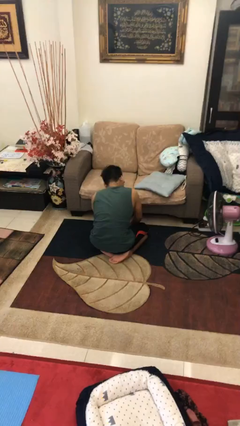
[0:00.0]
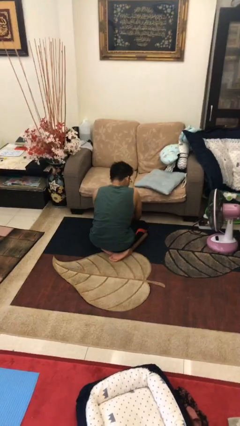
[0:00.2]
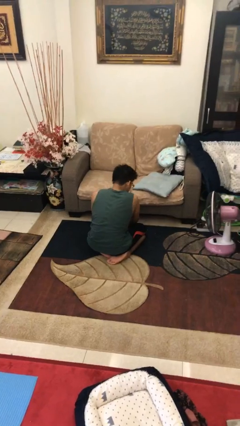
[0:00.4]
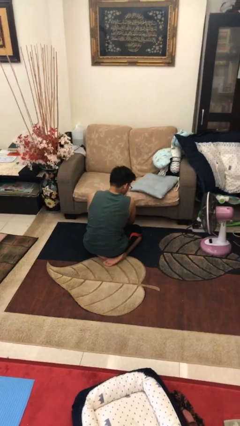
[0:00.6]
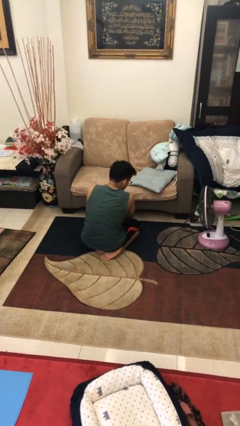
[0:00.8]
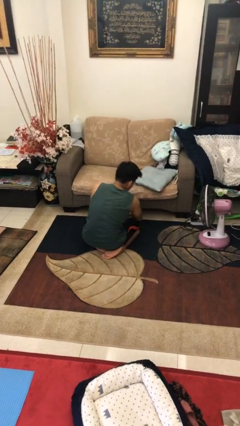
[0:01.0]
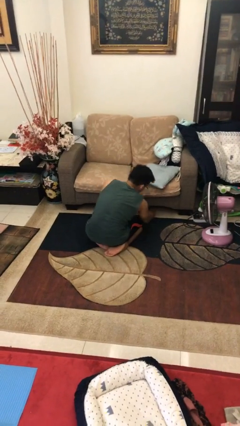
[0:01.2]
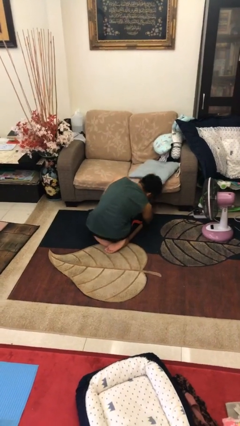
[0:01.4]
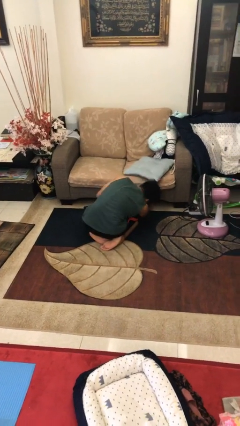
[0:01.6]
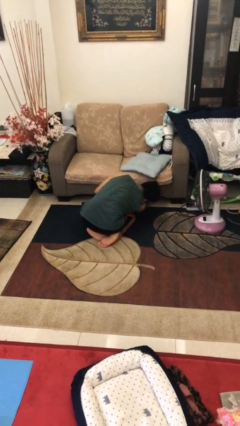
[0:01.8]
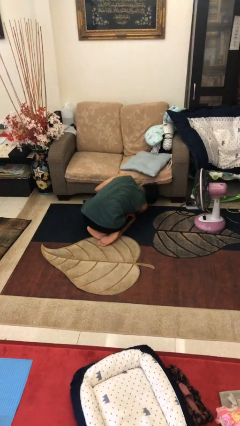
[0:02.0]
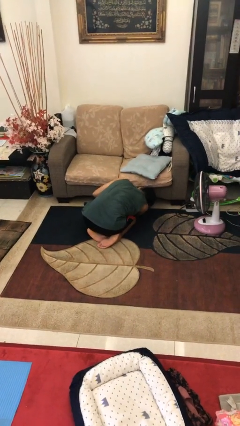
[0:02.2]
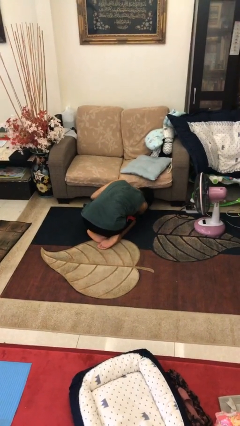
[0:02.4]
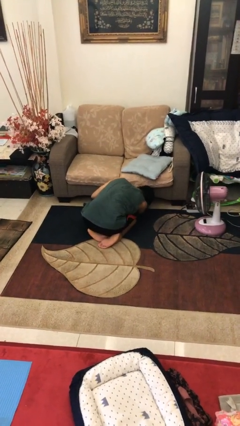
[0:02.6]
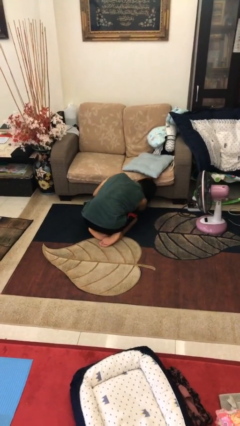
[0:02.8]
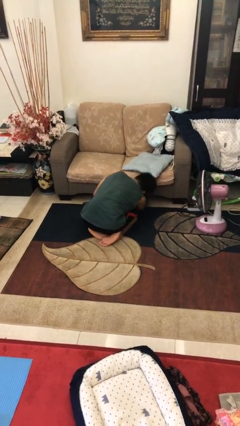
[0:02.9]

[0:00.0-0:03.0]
person searches under couch

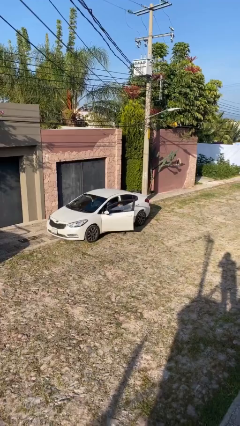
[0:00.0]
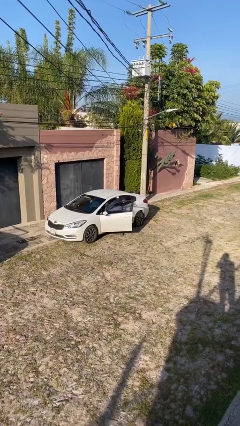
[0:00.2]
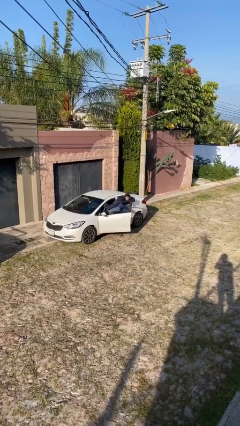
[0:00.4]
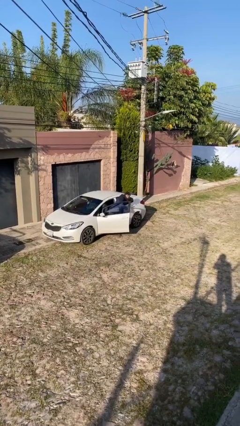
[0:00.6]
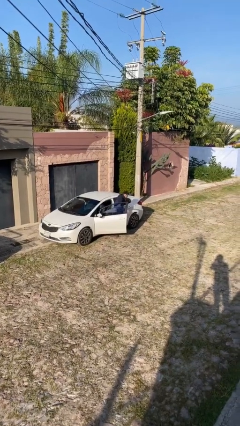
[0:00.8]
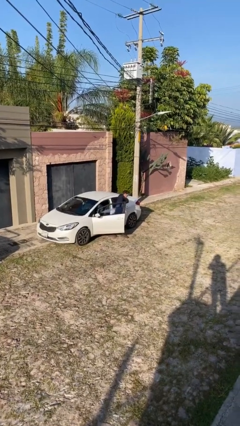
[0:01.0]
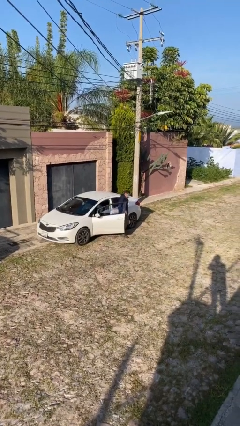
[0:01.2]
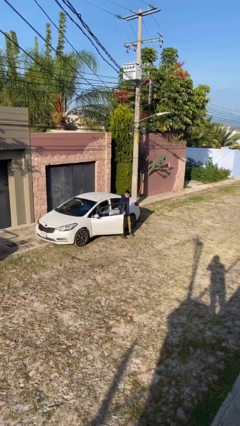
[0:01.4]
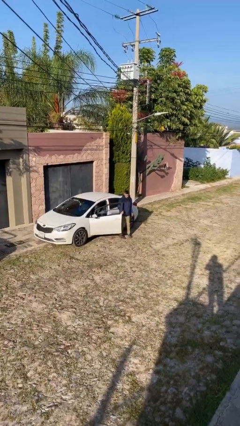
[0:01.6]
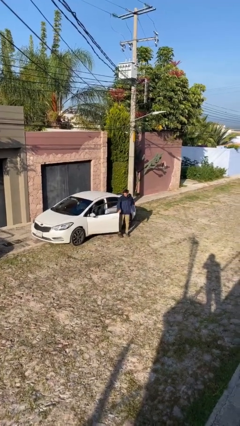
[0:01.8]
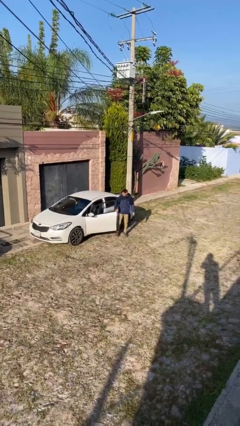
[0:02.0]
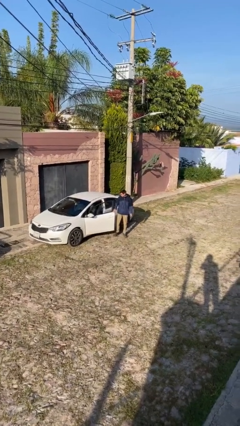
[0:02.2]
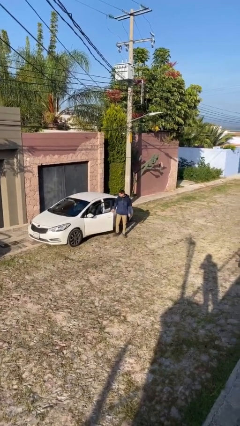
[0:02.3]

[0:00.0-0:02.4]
person exits car

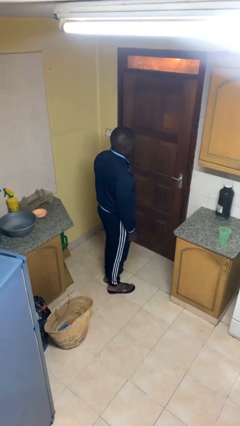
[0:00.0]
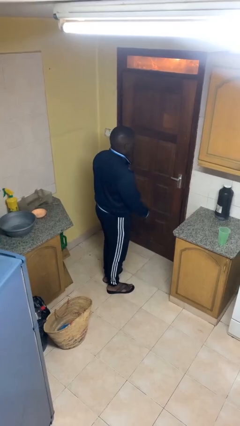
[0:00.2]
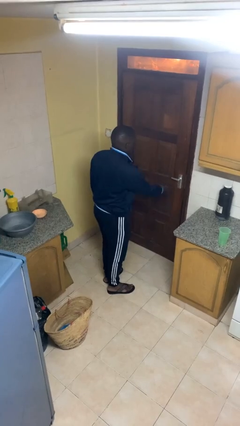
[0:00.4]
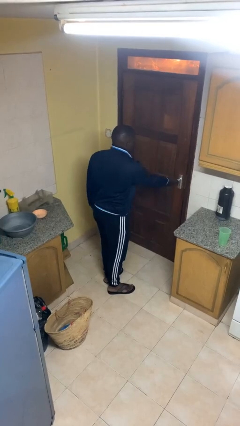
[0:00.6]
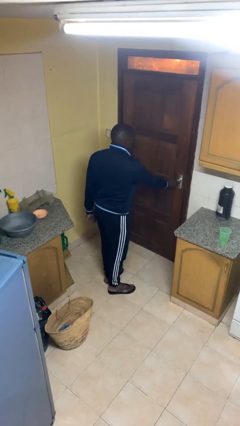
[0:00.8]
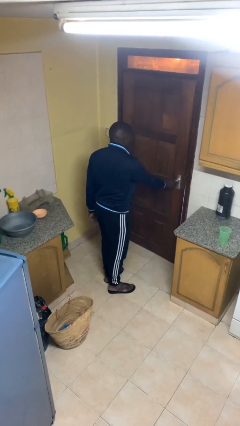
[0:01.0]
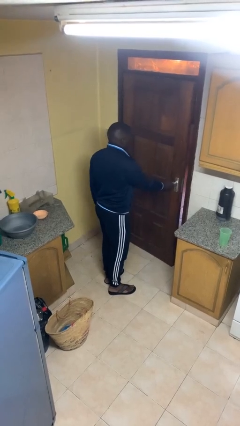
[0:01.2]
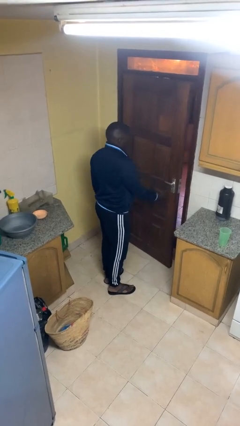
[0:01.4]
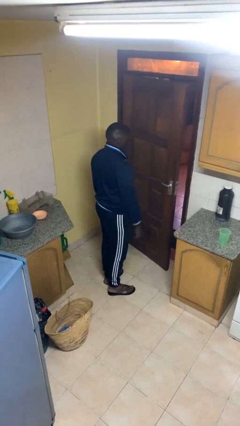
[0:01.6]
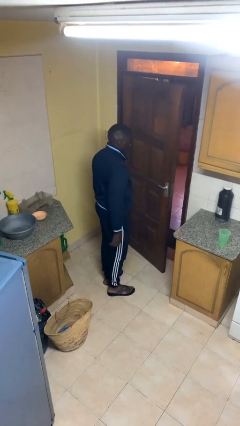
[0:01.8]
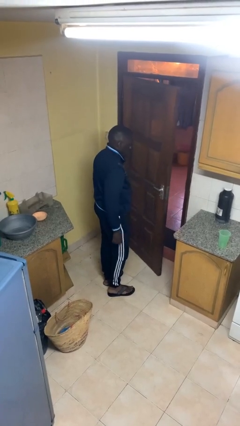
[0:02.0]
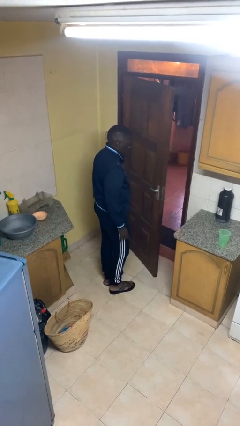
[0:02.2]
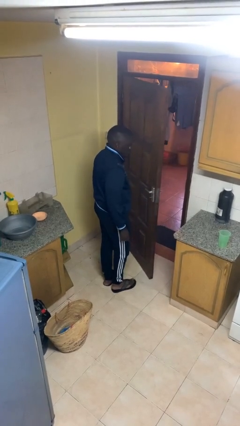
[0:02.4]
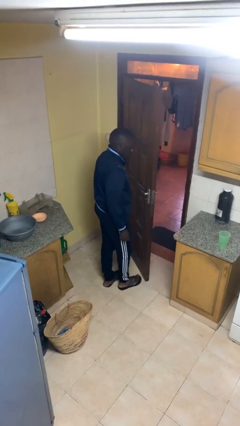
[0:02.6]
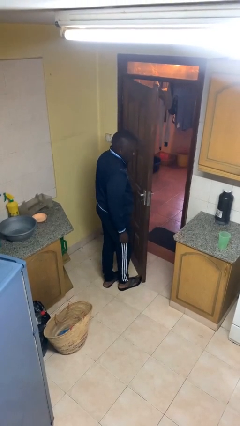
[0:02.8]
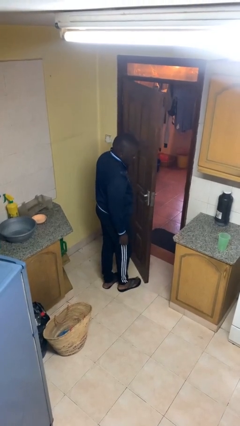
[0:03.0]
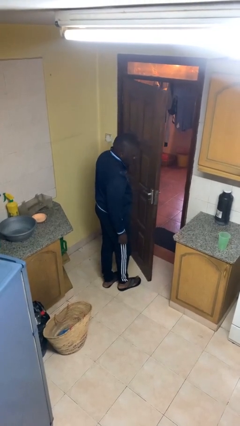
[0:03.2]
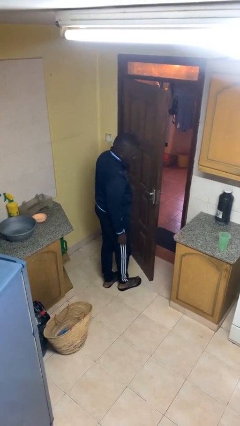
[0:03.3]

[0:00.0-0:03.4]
person opens facility door

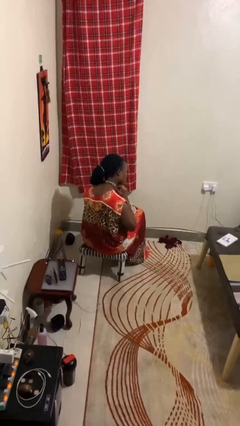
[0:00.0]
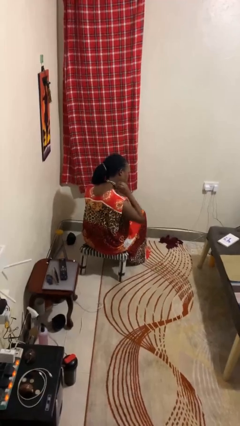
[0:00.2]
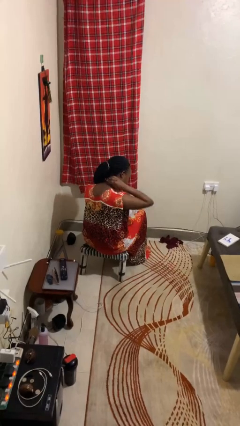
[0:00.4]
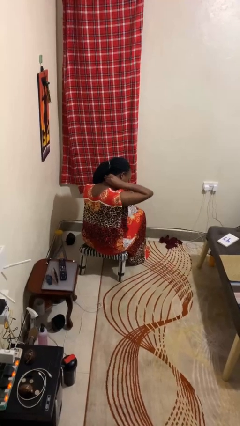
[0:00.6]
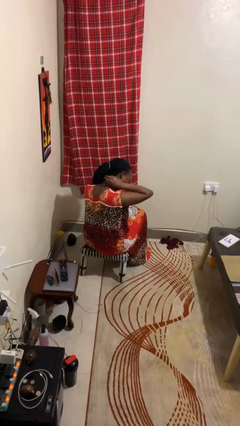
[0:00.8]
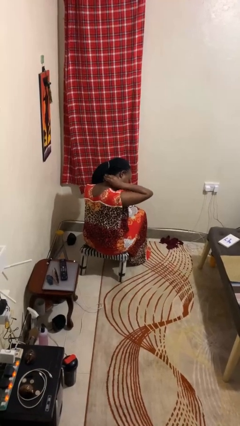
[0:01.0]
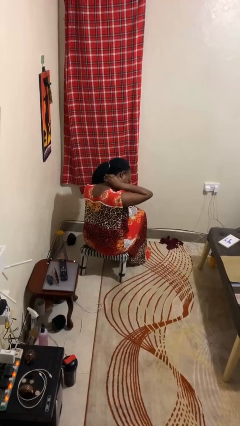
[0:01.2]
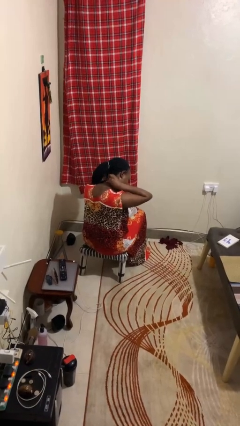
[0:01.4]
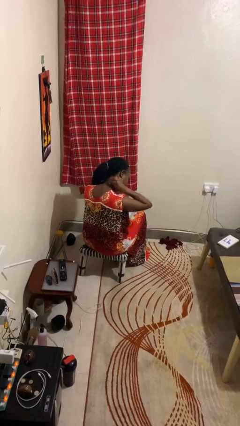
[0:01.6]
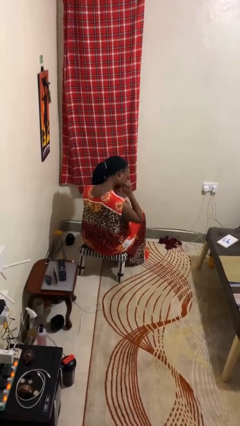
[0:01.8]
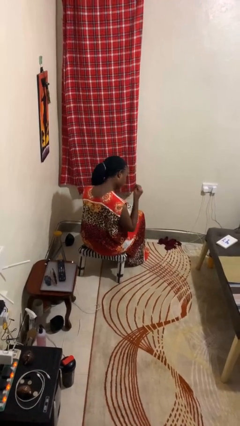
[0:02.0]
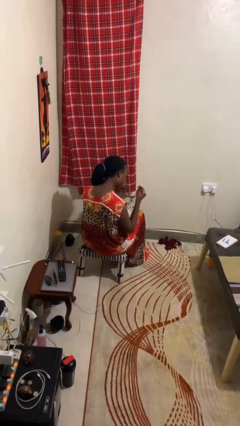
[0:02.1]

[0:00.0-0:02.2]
person takes off necklace

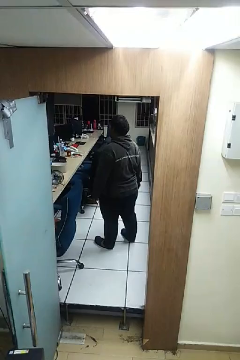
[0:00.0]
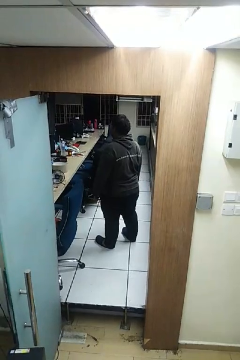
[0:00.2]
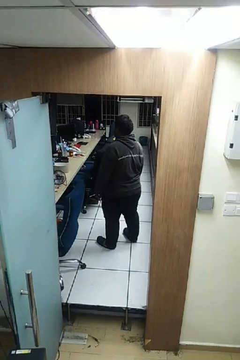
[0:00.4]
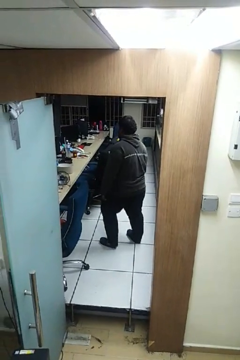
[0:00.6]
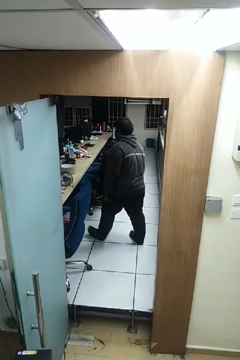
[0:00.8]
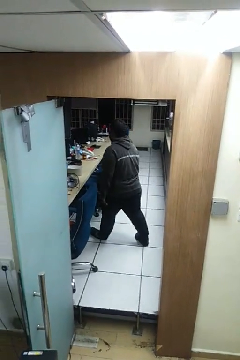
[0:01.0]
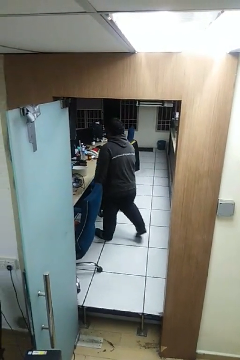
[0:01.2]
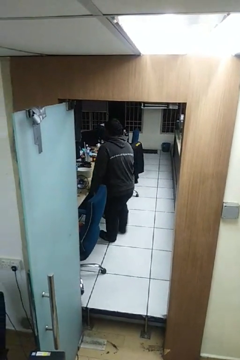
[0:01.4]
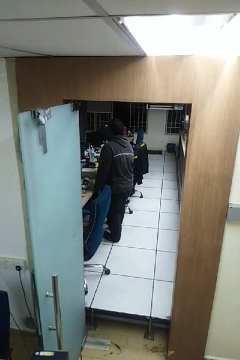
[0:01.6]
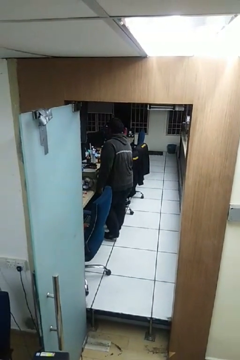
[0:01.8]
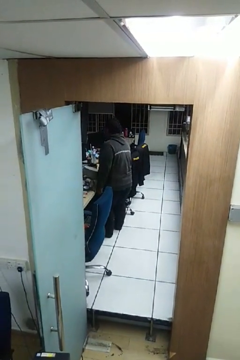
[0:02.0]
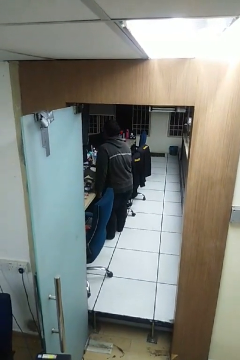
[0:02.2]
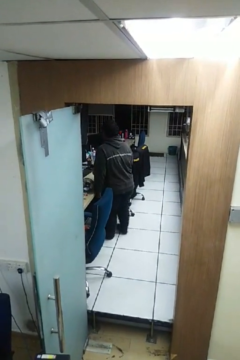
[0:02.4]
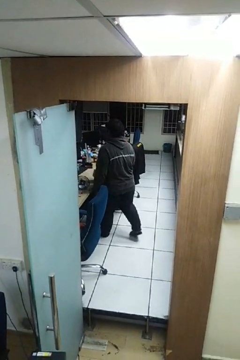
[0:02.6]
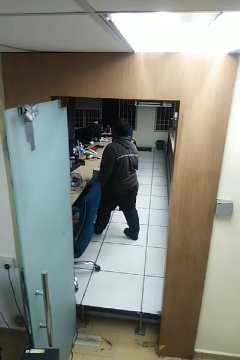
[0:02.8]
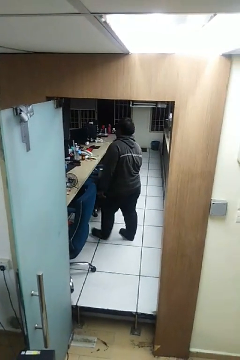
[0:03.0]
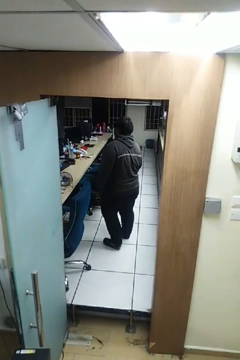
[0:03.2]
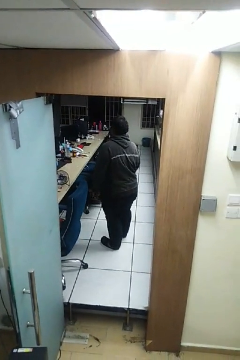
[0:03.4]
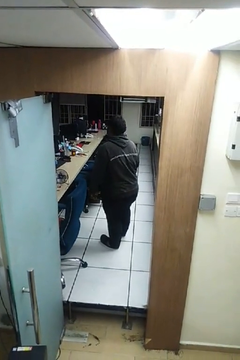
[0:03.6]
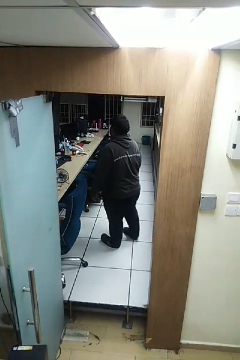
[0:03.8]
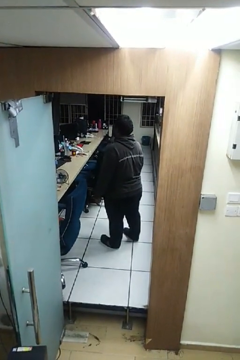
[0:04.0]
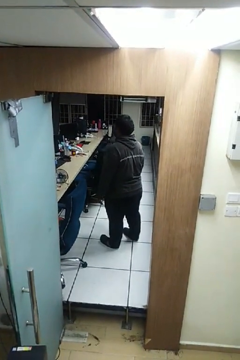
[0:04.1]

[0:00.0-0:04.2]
person picks up object from table

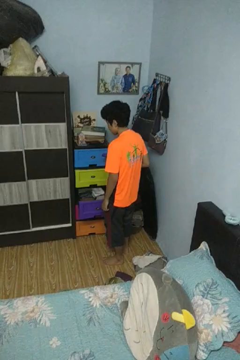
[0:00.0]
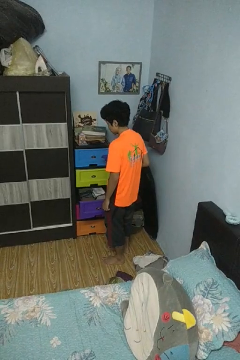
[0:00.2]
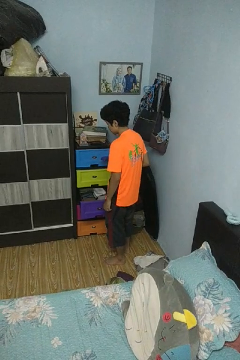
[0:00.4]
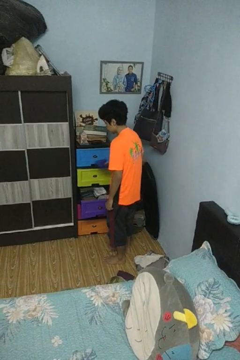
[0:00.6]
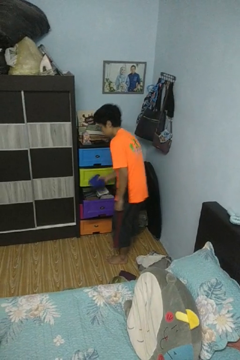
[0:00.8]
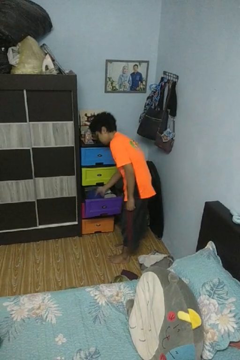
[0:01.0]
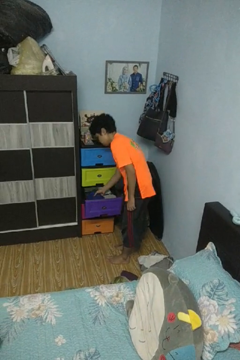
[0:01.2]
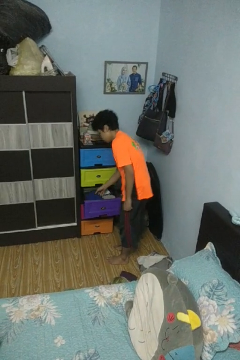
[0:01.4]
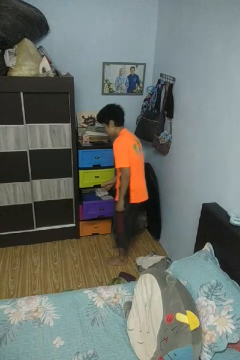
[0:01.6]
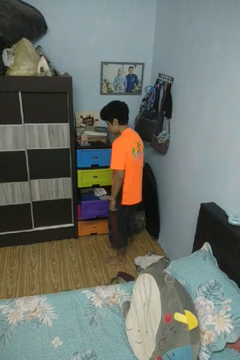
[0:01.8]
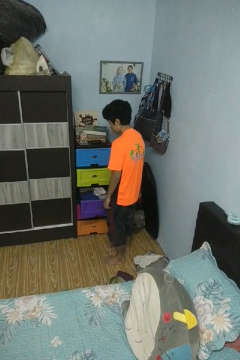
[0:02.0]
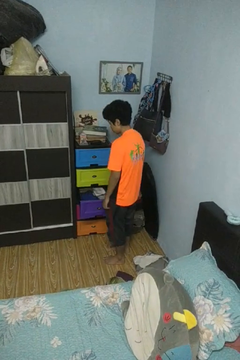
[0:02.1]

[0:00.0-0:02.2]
person puts clothes into dresser

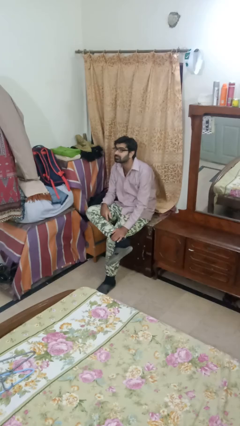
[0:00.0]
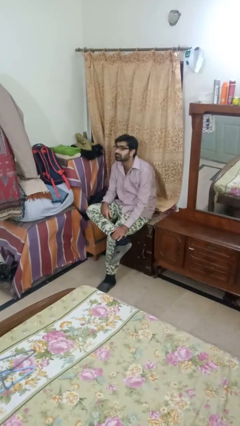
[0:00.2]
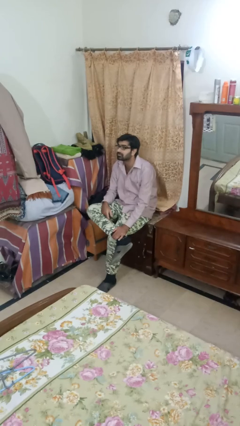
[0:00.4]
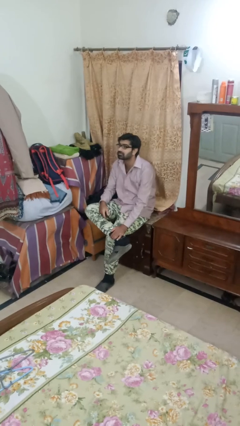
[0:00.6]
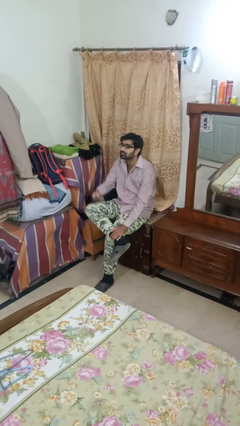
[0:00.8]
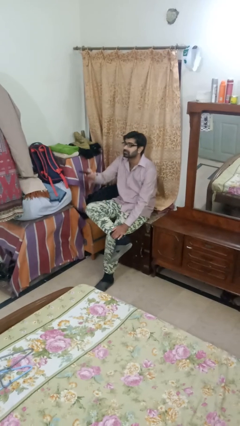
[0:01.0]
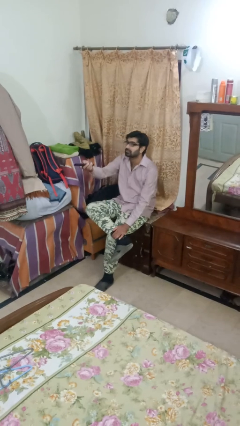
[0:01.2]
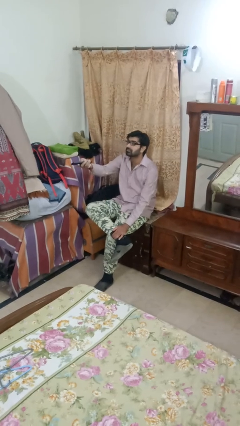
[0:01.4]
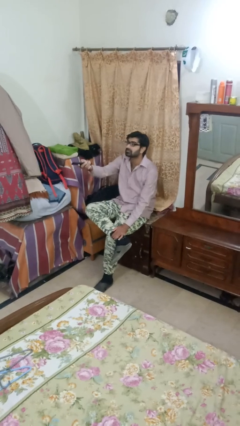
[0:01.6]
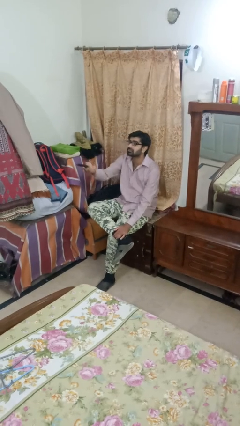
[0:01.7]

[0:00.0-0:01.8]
person uses television remote
